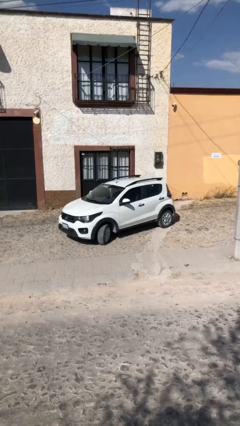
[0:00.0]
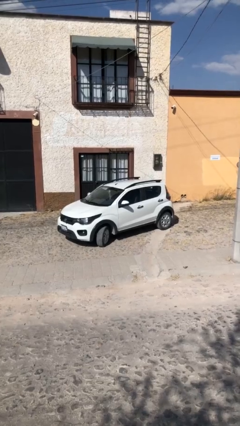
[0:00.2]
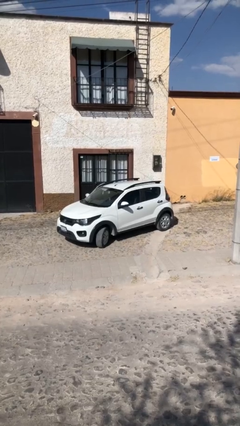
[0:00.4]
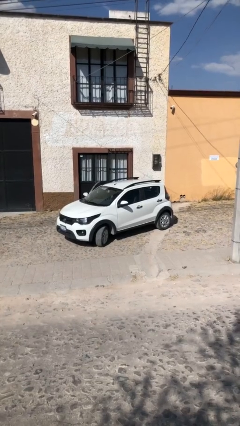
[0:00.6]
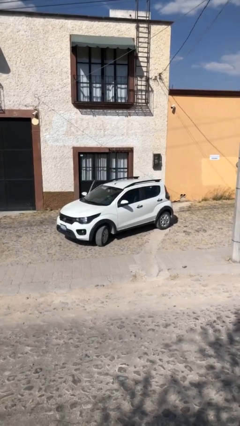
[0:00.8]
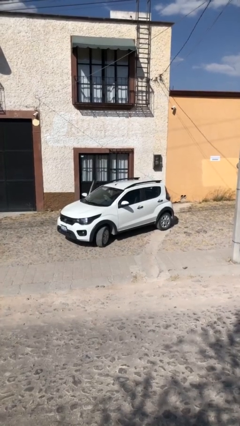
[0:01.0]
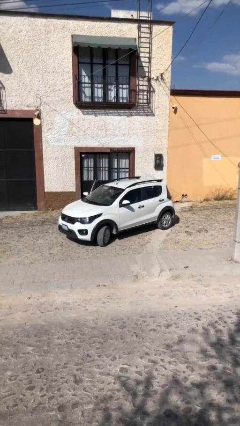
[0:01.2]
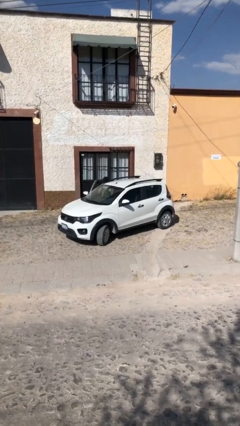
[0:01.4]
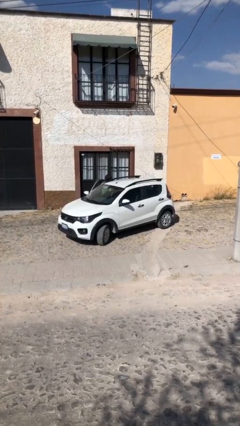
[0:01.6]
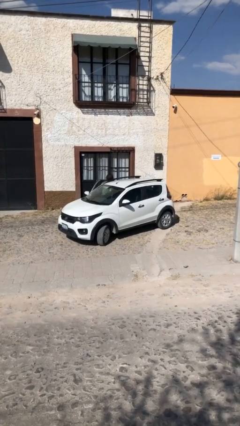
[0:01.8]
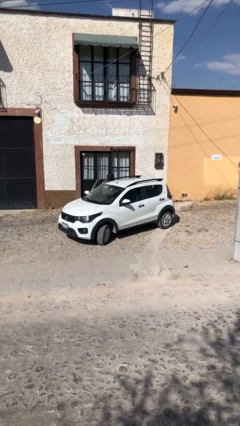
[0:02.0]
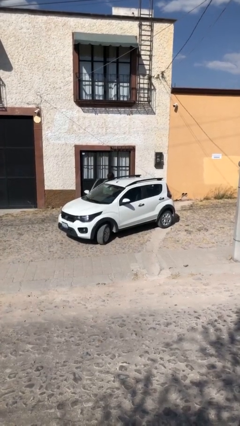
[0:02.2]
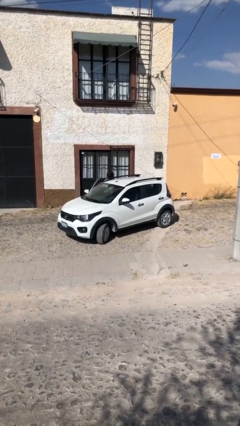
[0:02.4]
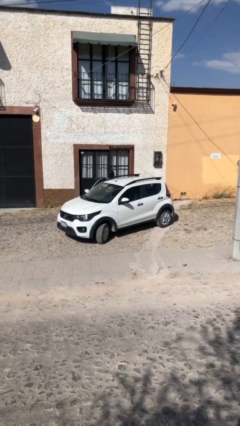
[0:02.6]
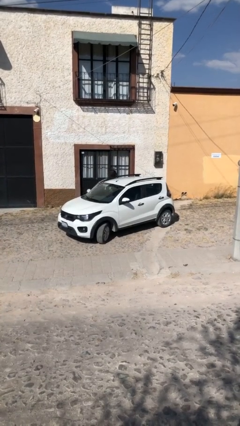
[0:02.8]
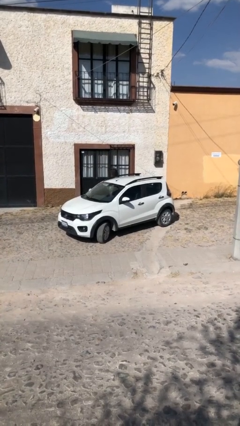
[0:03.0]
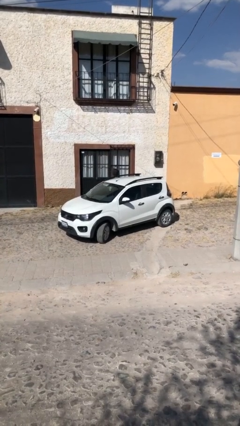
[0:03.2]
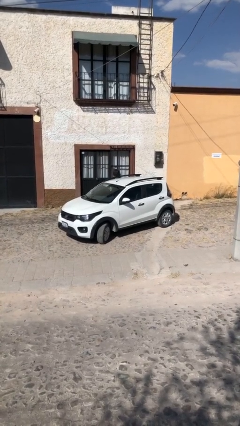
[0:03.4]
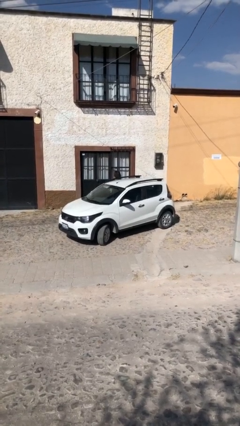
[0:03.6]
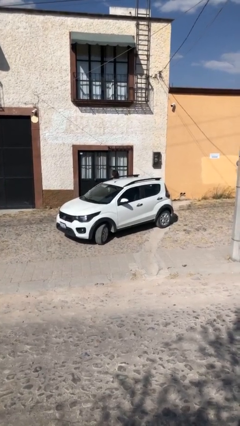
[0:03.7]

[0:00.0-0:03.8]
car drops off person

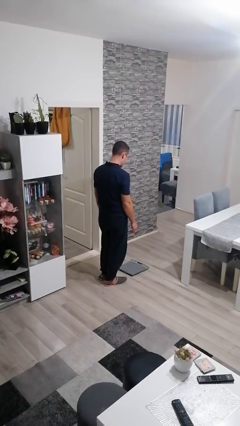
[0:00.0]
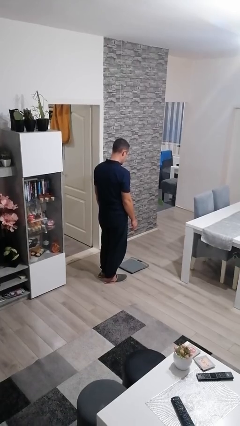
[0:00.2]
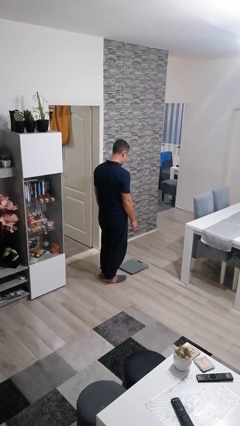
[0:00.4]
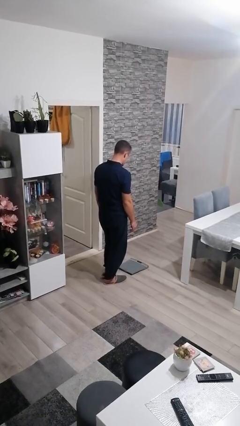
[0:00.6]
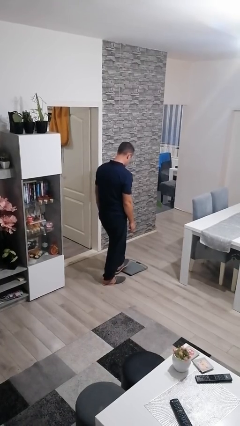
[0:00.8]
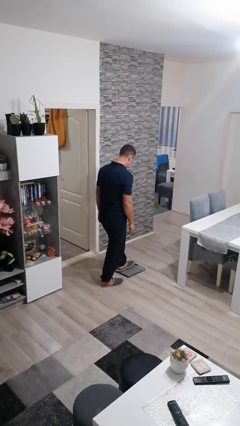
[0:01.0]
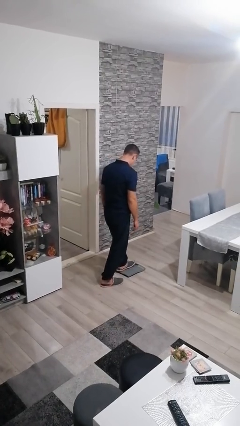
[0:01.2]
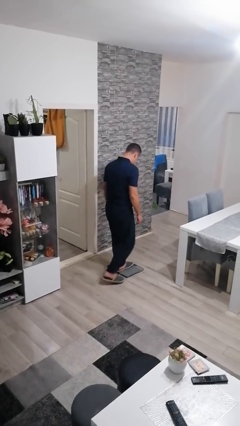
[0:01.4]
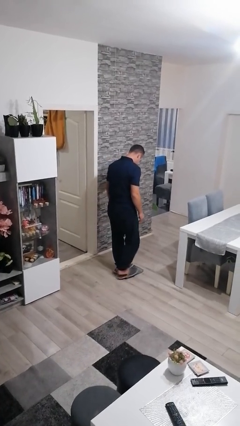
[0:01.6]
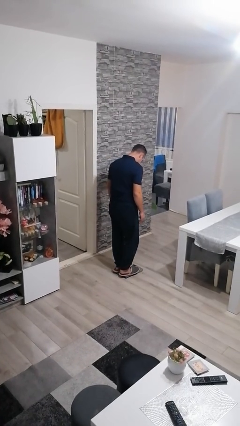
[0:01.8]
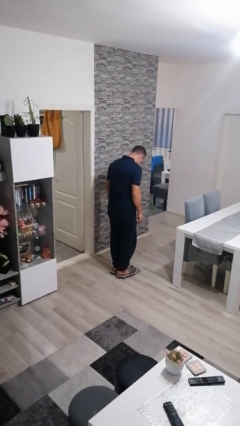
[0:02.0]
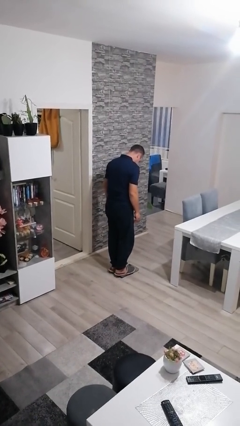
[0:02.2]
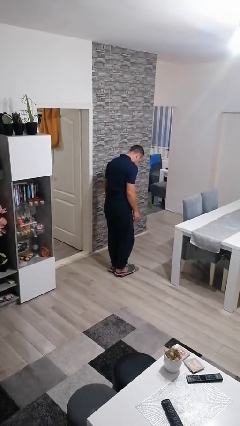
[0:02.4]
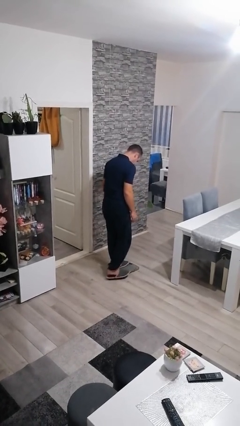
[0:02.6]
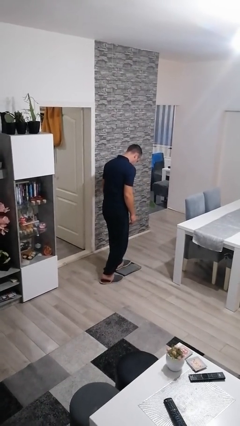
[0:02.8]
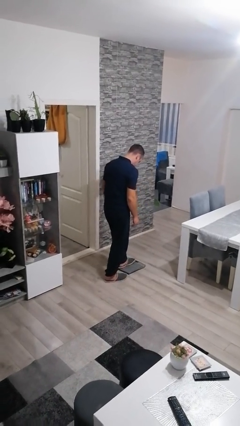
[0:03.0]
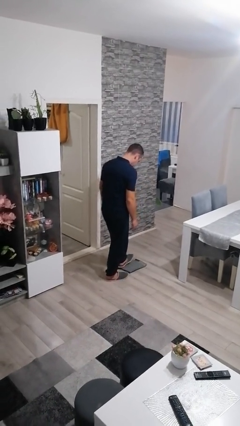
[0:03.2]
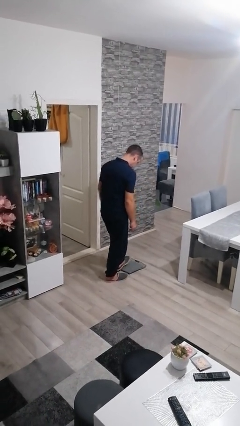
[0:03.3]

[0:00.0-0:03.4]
person uses bodyweight scale

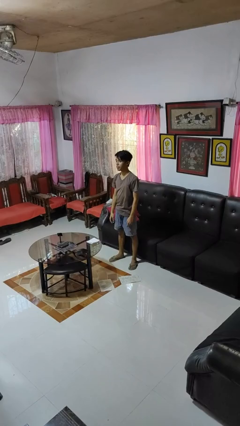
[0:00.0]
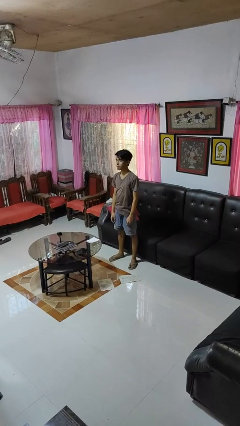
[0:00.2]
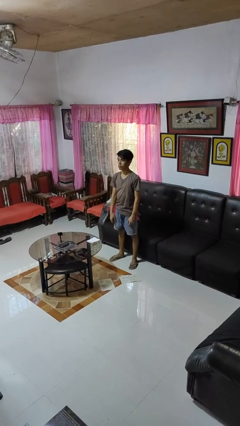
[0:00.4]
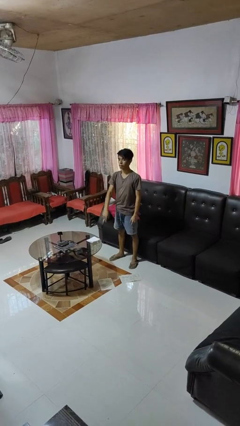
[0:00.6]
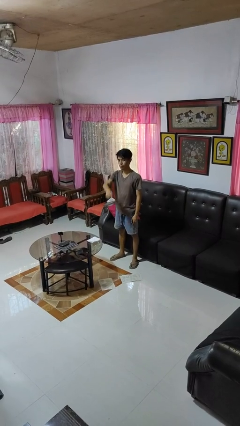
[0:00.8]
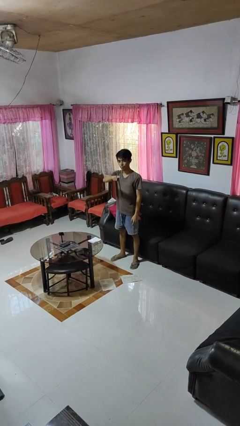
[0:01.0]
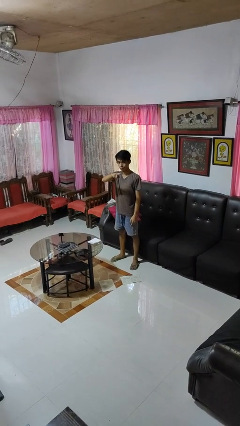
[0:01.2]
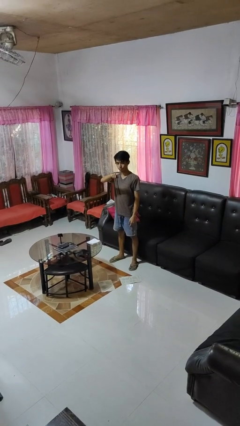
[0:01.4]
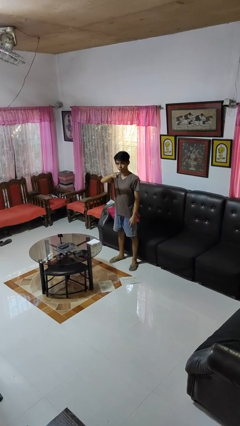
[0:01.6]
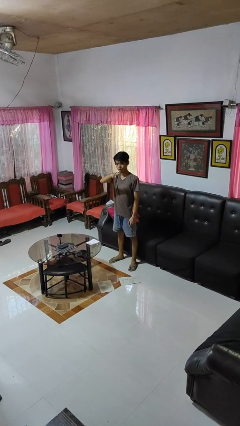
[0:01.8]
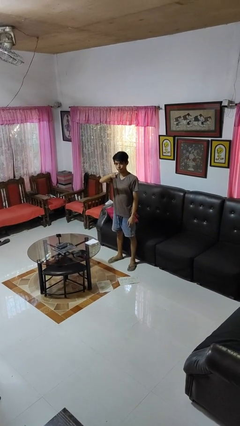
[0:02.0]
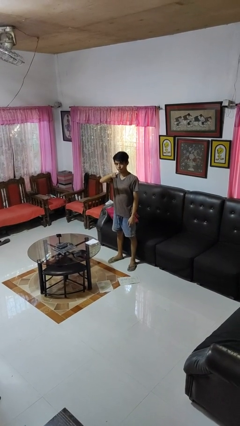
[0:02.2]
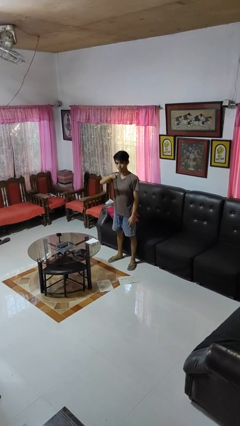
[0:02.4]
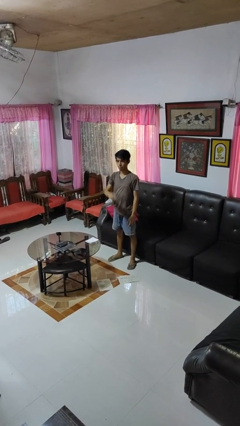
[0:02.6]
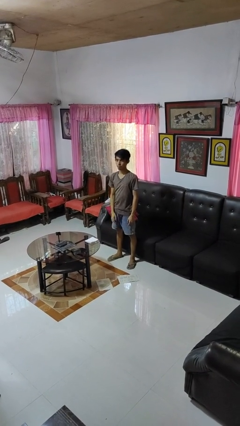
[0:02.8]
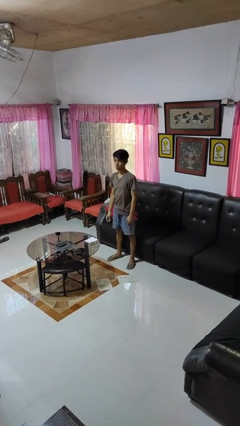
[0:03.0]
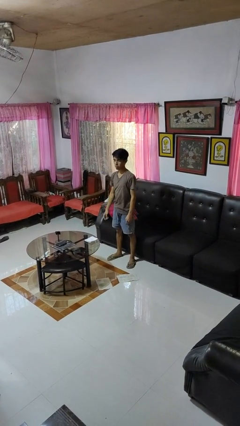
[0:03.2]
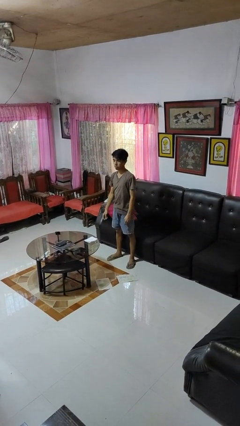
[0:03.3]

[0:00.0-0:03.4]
person points at person

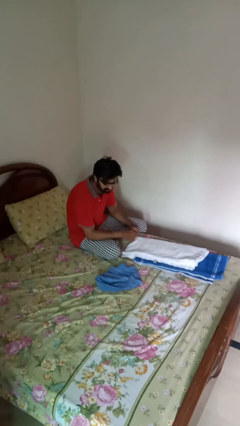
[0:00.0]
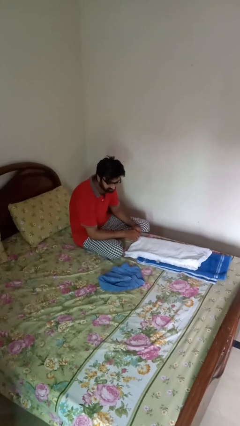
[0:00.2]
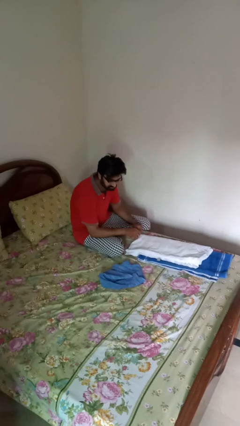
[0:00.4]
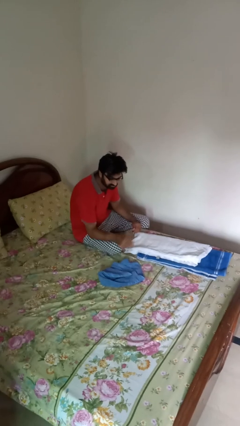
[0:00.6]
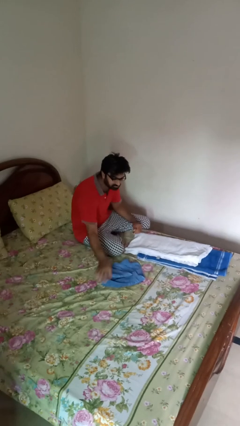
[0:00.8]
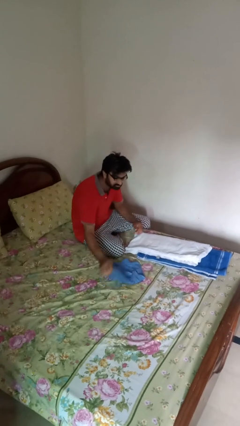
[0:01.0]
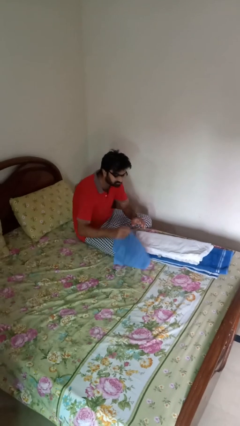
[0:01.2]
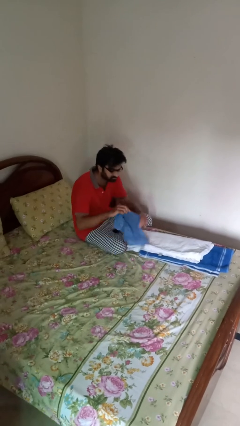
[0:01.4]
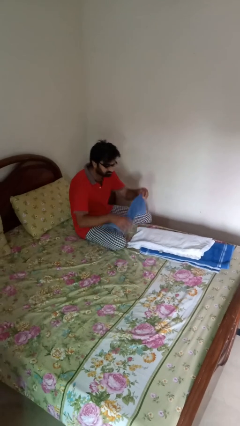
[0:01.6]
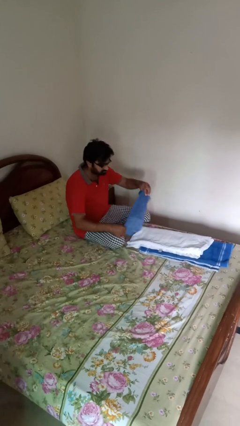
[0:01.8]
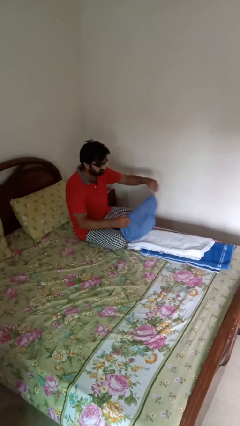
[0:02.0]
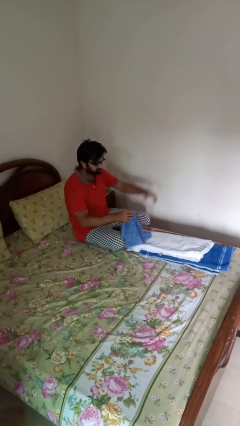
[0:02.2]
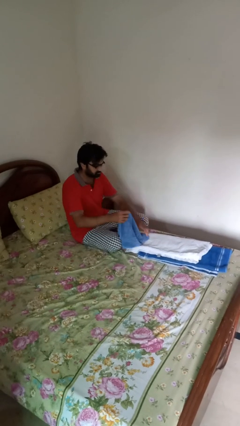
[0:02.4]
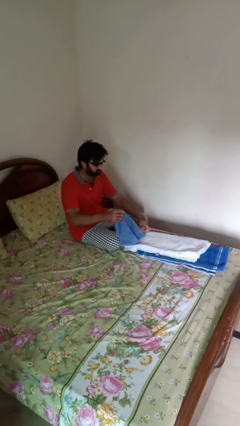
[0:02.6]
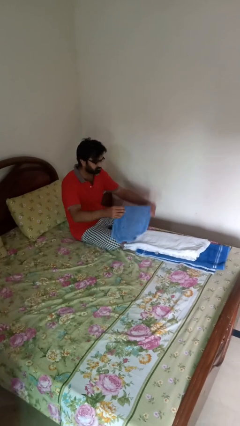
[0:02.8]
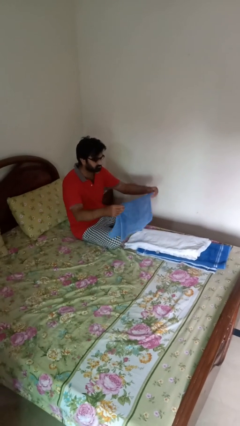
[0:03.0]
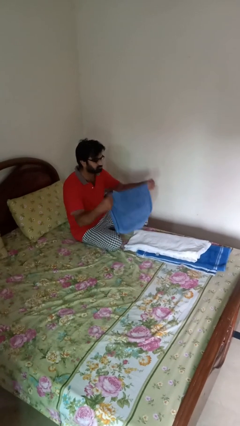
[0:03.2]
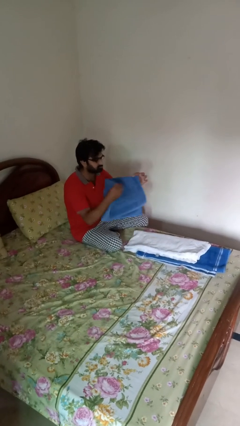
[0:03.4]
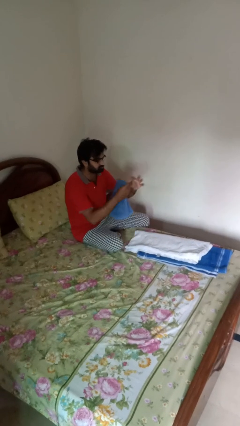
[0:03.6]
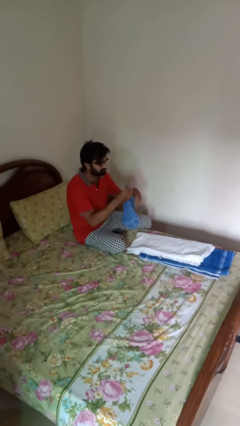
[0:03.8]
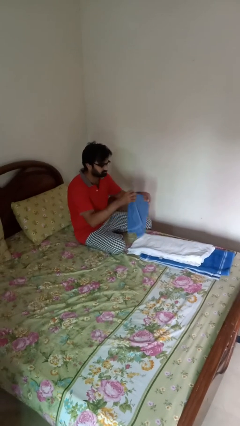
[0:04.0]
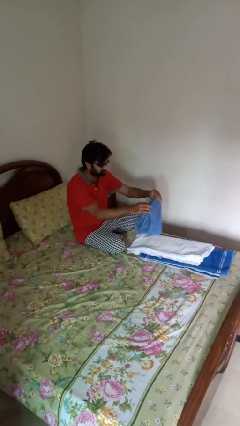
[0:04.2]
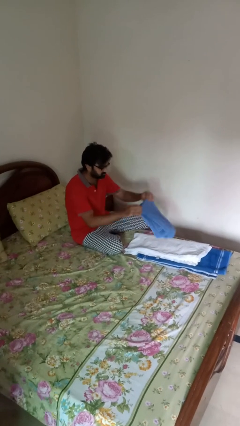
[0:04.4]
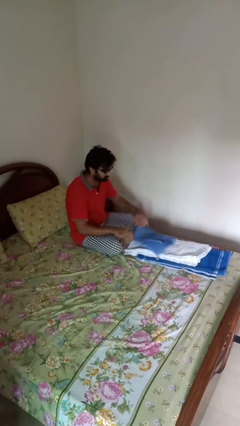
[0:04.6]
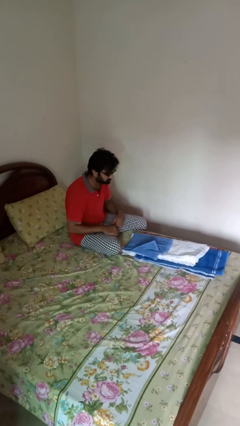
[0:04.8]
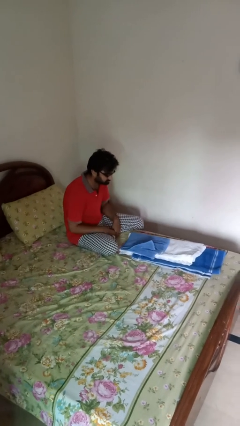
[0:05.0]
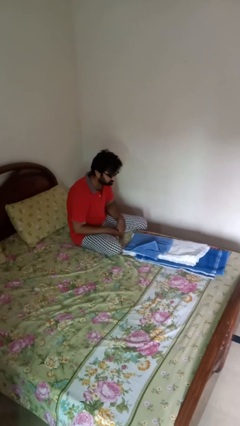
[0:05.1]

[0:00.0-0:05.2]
person folds towel

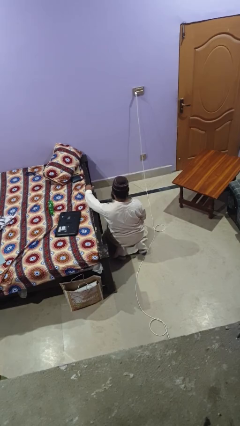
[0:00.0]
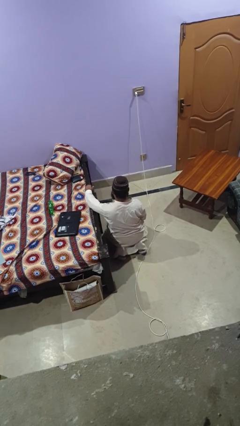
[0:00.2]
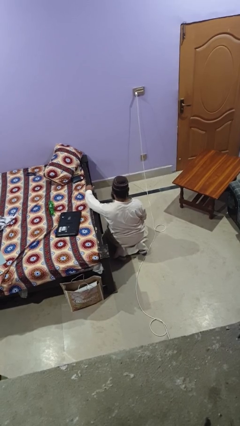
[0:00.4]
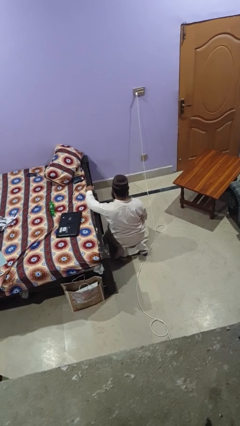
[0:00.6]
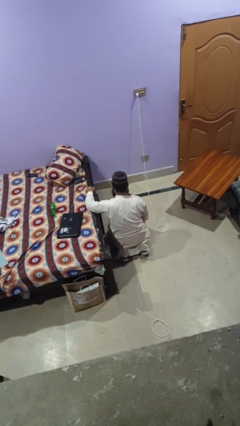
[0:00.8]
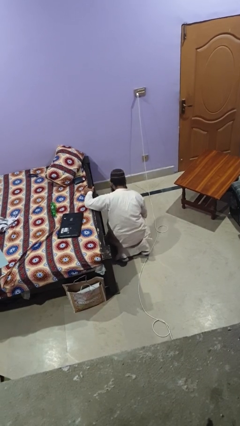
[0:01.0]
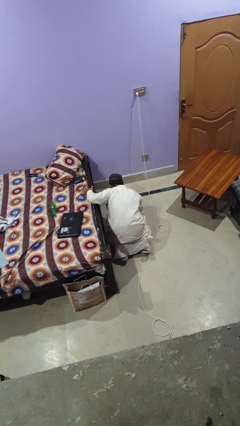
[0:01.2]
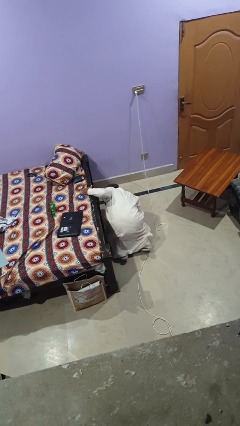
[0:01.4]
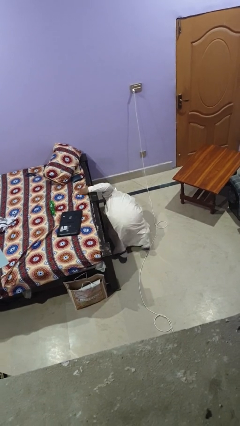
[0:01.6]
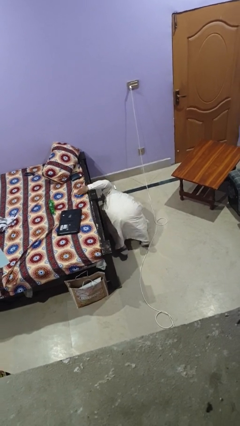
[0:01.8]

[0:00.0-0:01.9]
person searches under bed

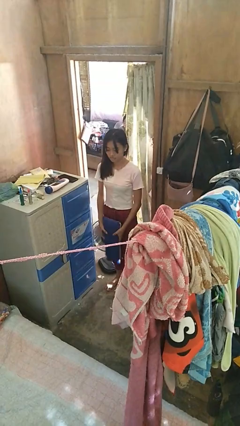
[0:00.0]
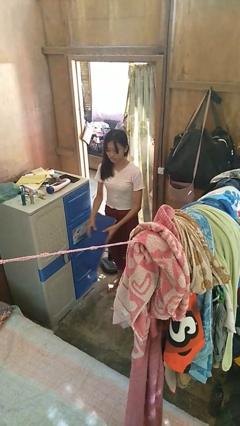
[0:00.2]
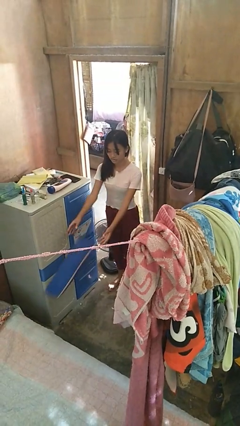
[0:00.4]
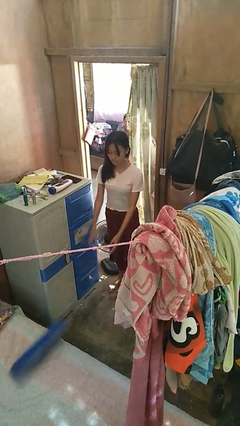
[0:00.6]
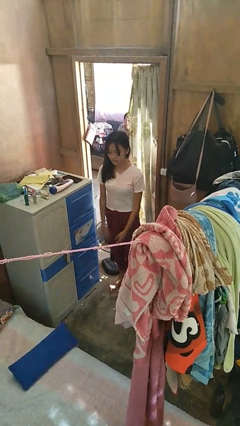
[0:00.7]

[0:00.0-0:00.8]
person throws object on bed
